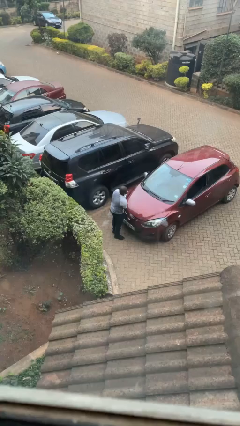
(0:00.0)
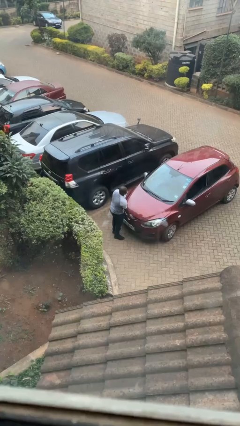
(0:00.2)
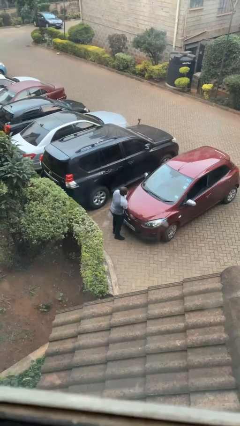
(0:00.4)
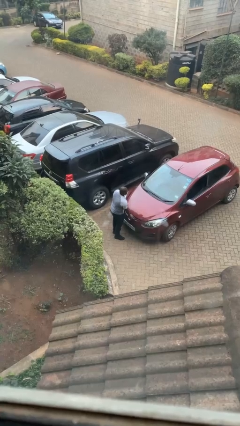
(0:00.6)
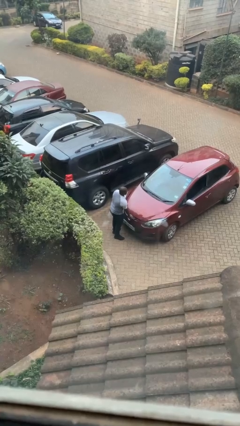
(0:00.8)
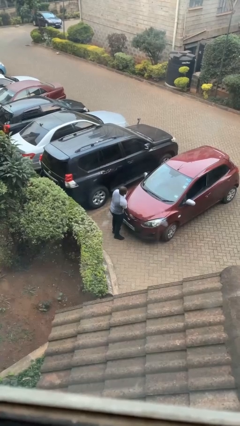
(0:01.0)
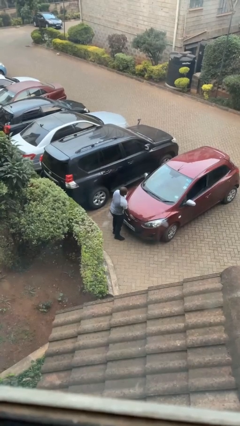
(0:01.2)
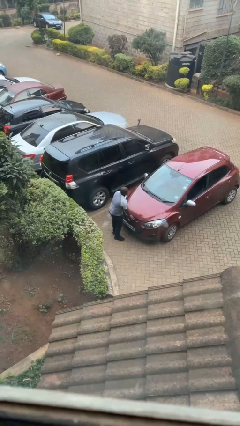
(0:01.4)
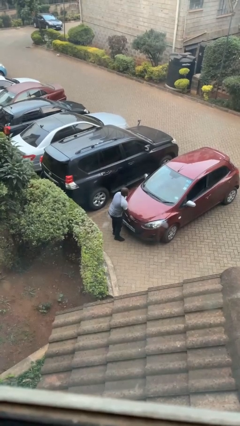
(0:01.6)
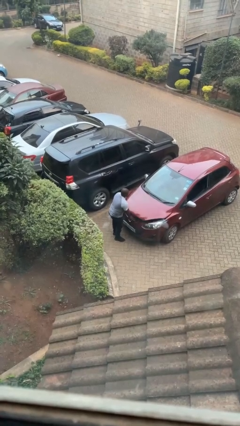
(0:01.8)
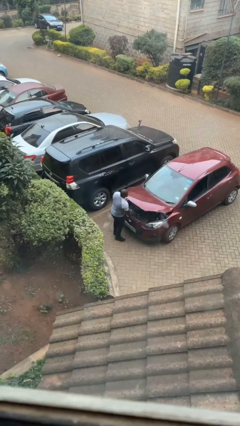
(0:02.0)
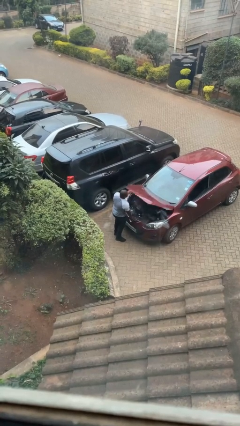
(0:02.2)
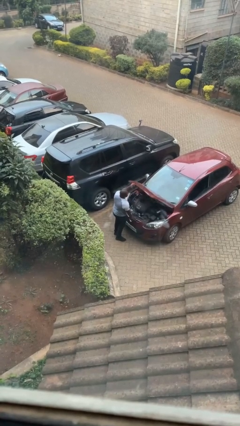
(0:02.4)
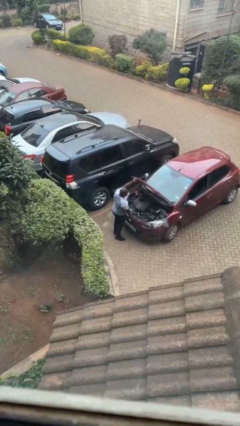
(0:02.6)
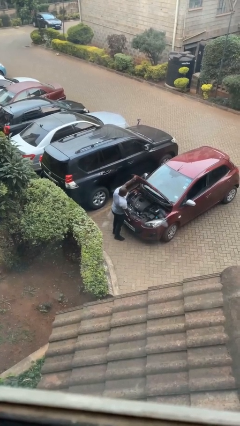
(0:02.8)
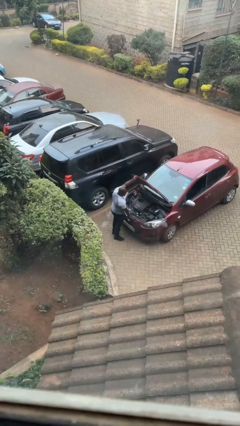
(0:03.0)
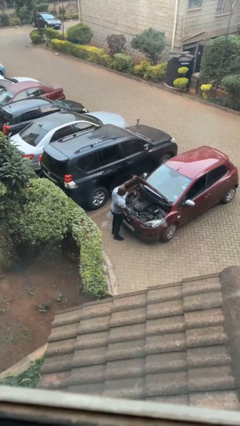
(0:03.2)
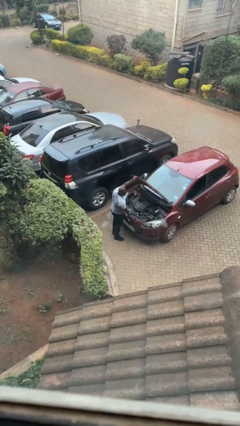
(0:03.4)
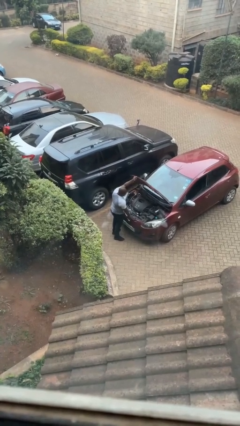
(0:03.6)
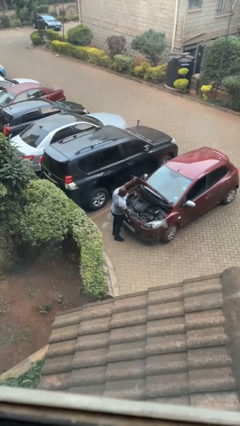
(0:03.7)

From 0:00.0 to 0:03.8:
person opens car hood

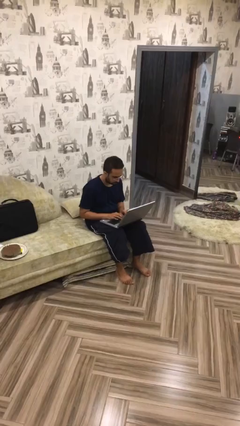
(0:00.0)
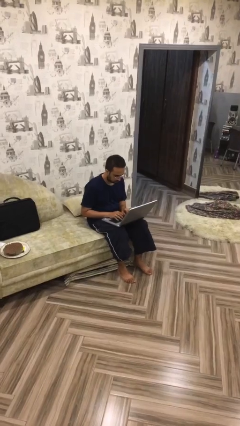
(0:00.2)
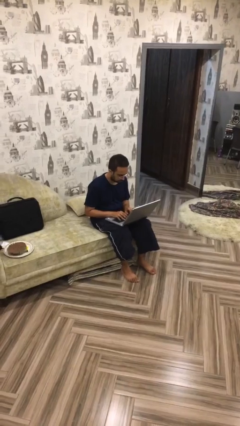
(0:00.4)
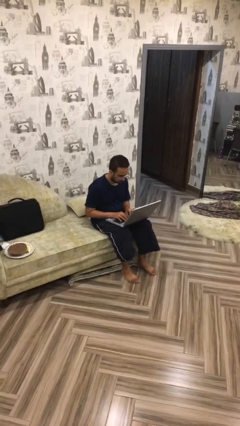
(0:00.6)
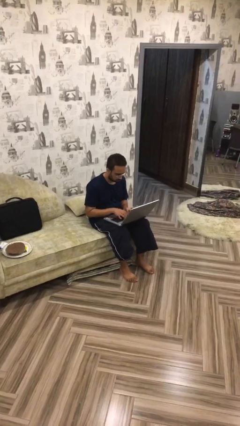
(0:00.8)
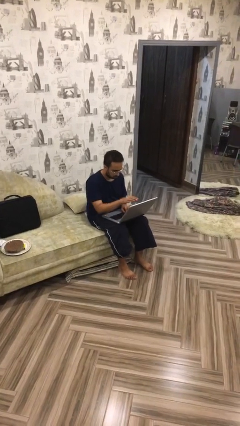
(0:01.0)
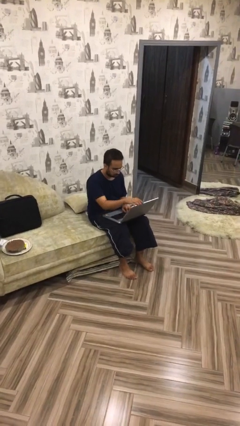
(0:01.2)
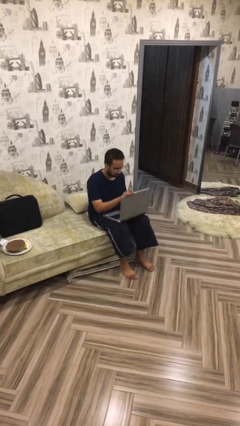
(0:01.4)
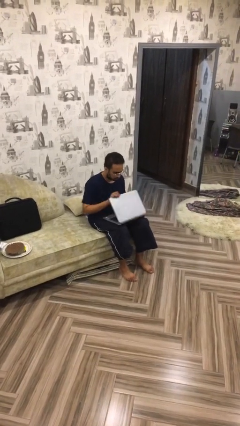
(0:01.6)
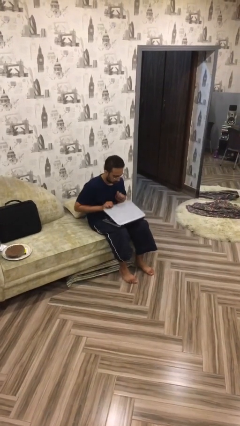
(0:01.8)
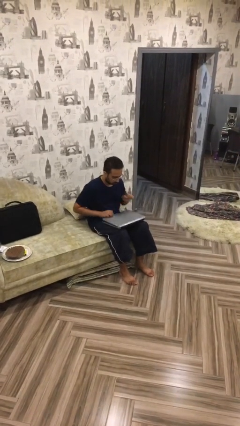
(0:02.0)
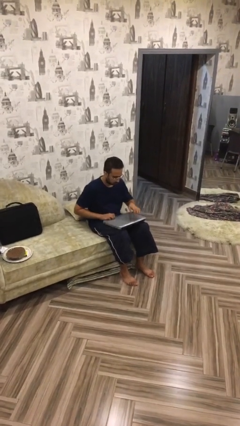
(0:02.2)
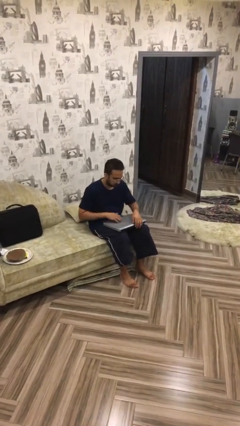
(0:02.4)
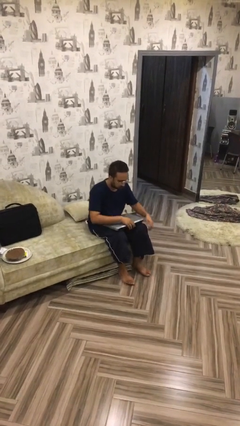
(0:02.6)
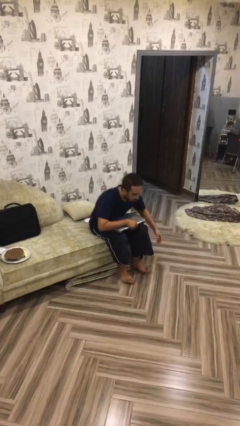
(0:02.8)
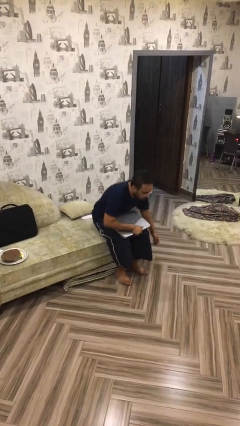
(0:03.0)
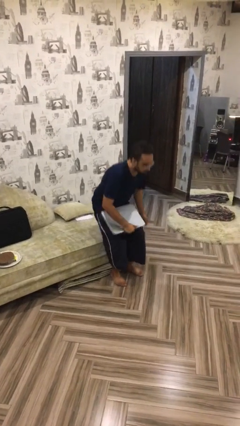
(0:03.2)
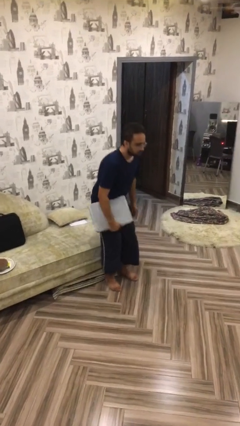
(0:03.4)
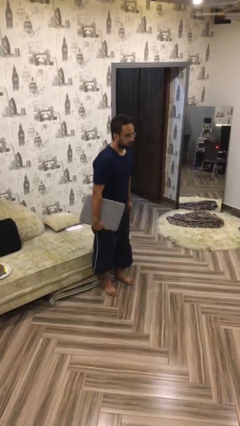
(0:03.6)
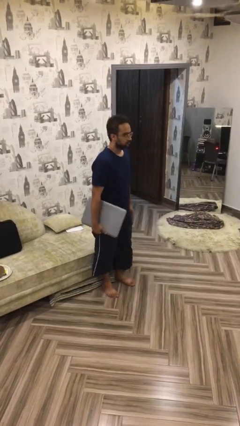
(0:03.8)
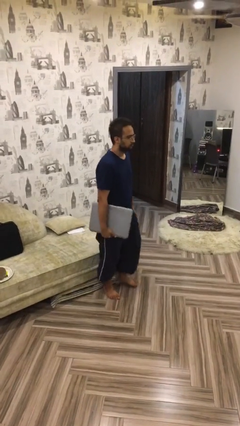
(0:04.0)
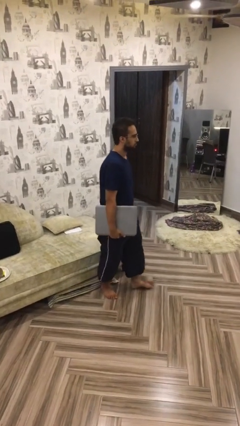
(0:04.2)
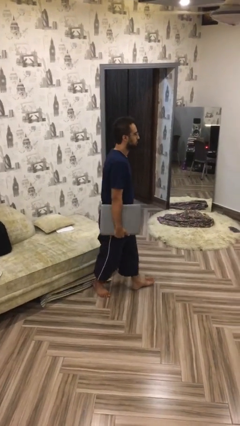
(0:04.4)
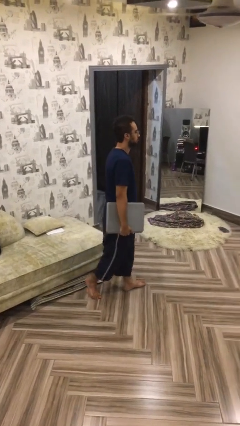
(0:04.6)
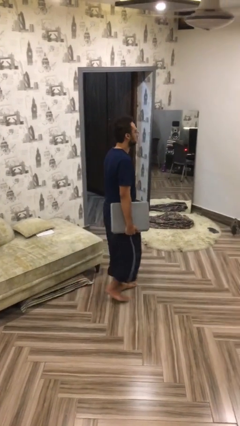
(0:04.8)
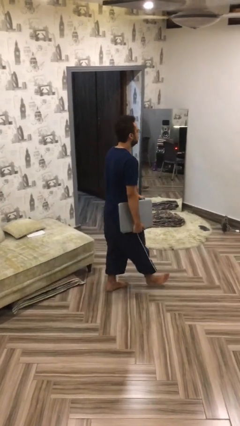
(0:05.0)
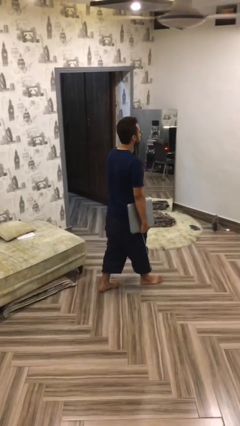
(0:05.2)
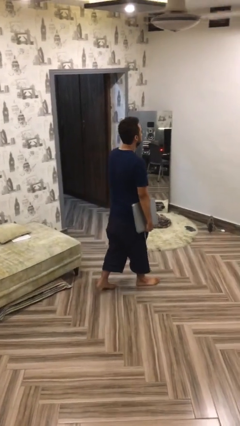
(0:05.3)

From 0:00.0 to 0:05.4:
person stands up

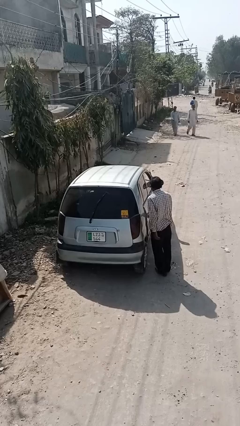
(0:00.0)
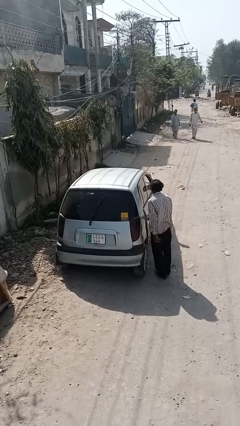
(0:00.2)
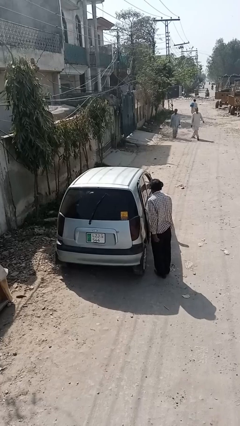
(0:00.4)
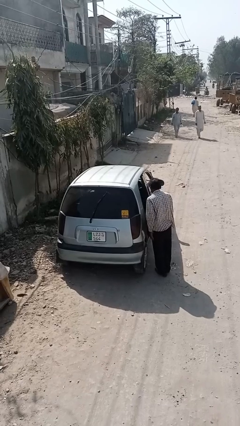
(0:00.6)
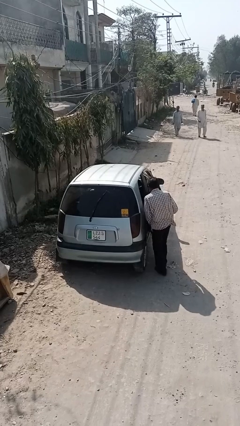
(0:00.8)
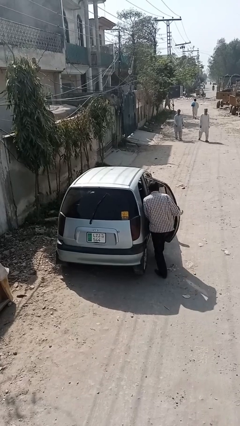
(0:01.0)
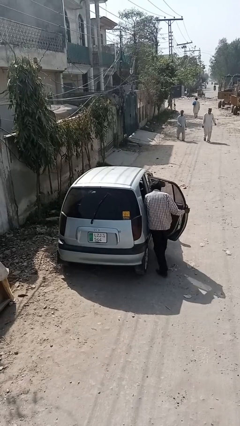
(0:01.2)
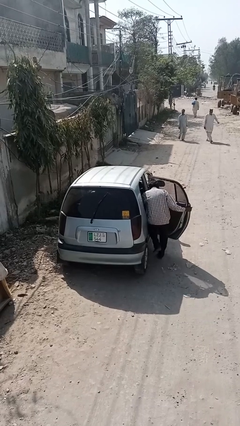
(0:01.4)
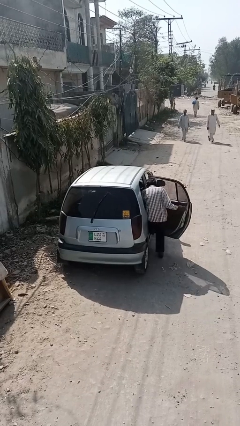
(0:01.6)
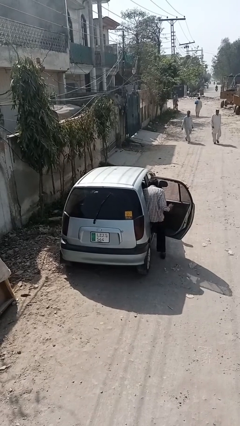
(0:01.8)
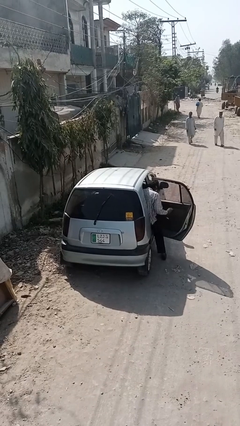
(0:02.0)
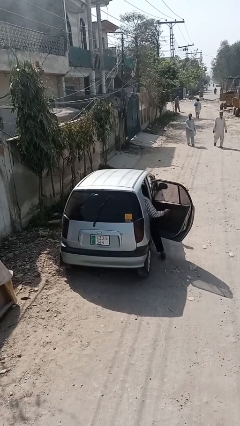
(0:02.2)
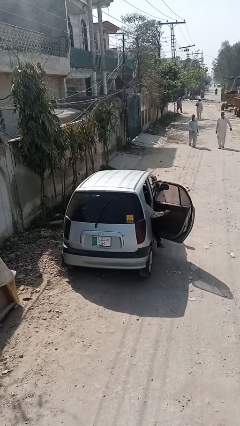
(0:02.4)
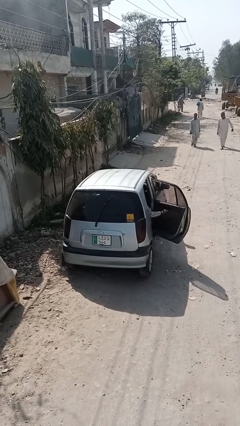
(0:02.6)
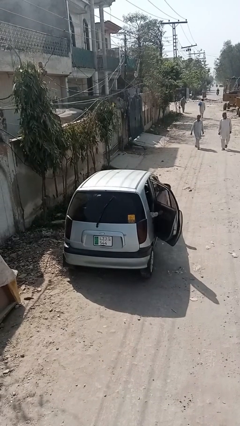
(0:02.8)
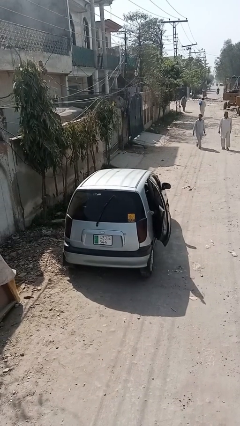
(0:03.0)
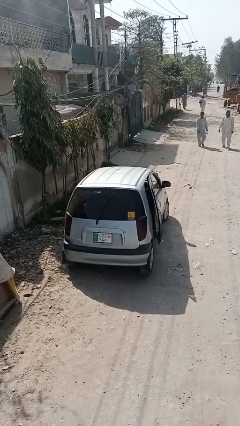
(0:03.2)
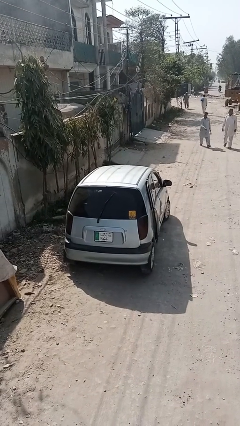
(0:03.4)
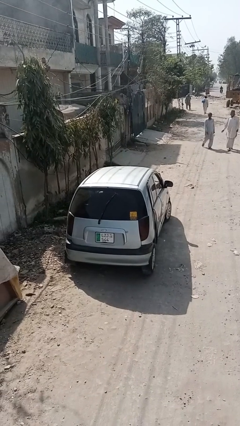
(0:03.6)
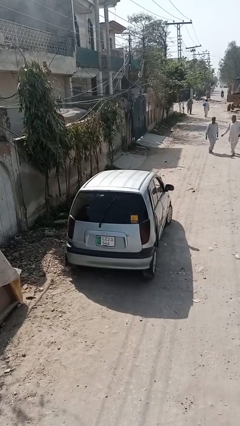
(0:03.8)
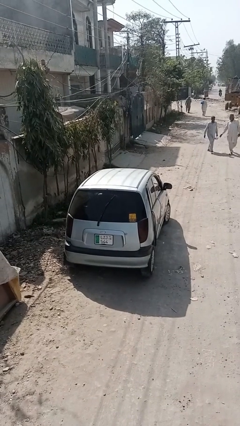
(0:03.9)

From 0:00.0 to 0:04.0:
car picks up person

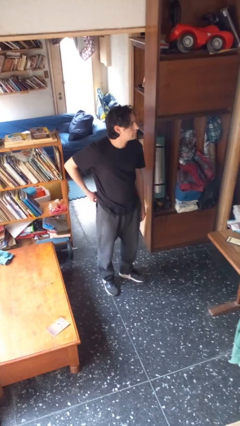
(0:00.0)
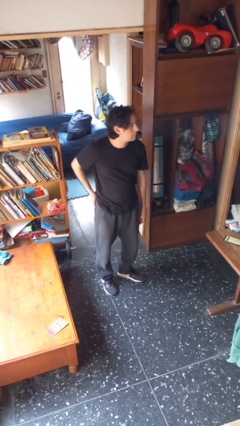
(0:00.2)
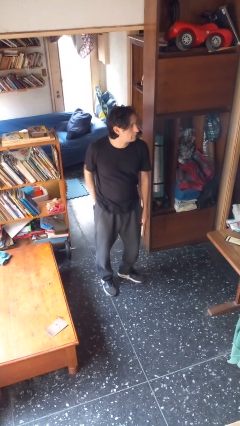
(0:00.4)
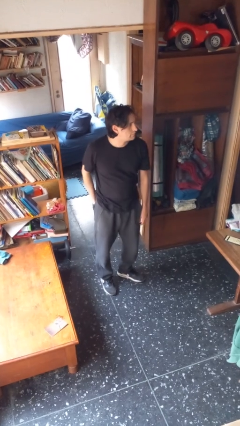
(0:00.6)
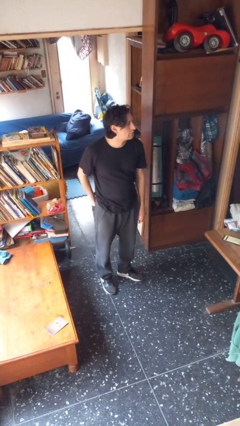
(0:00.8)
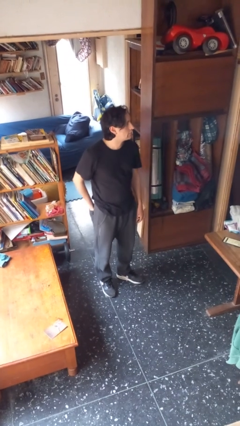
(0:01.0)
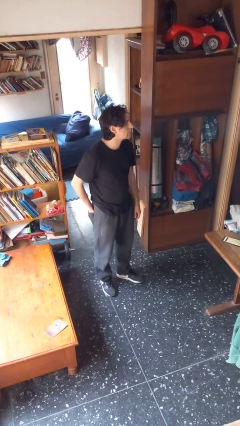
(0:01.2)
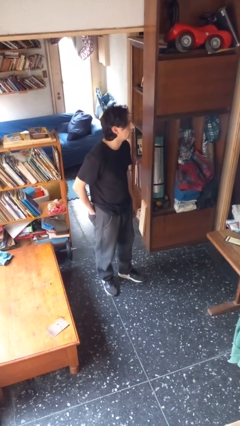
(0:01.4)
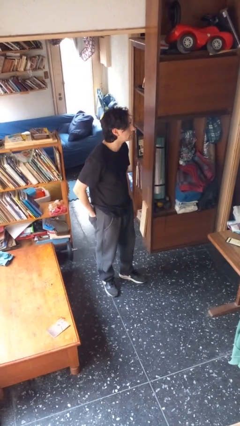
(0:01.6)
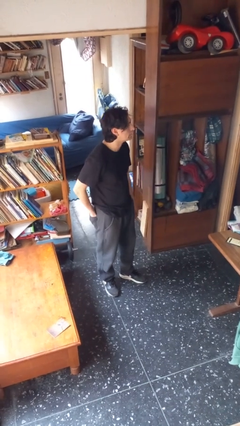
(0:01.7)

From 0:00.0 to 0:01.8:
person puts hands in back pockets

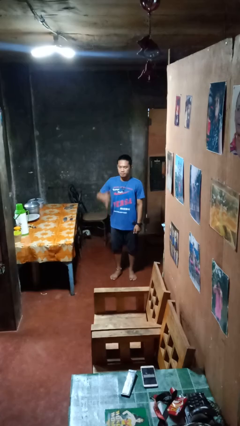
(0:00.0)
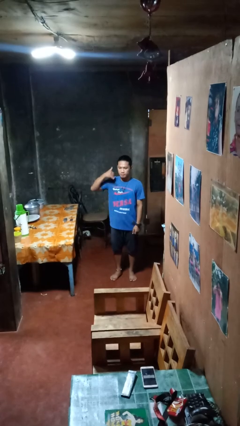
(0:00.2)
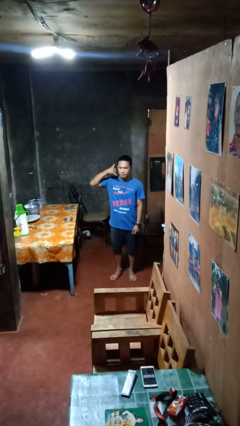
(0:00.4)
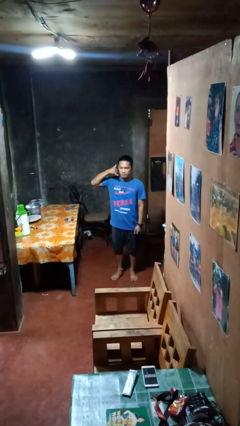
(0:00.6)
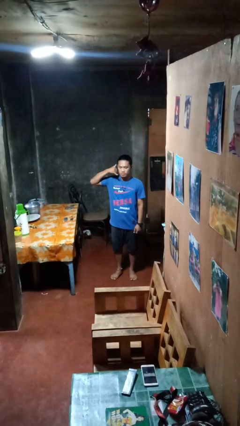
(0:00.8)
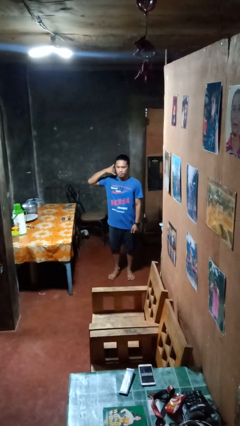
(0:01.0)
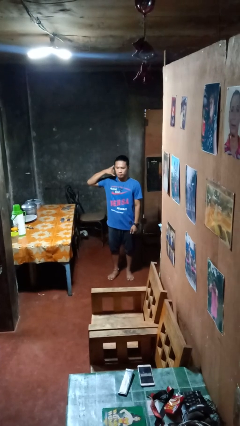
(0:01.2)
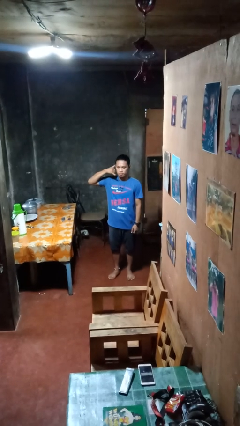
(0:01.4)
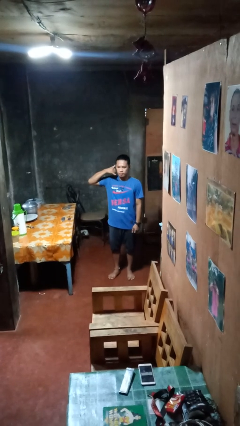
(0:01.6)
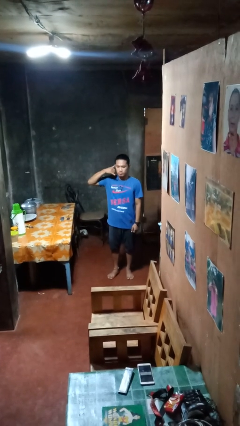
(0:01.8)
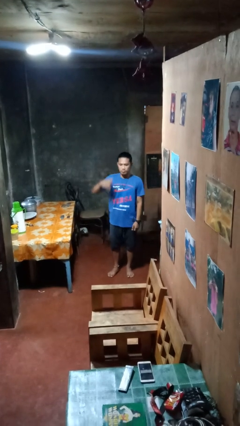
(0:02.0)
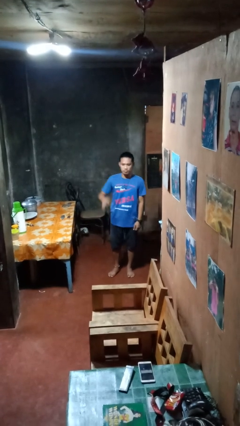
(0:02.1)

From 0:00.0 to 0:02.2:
person gestures call me

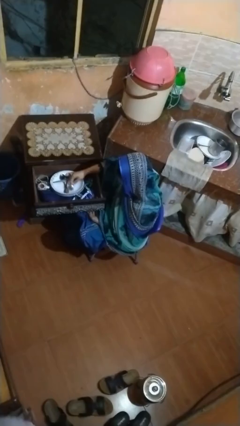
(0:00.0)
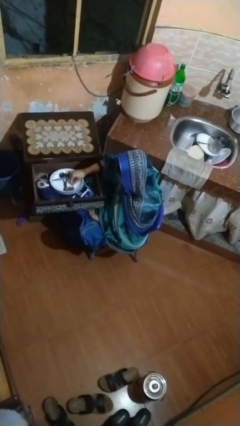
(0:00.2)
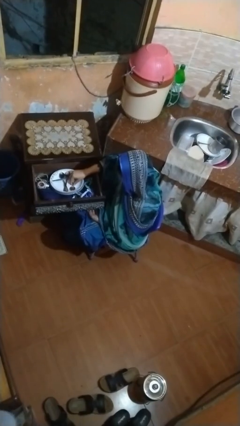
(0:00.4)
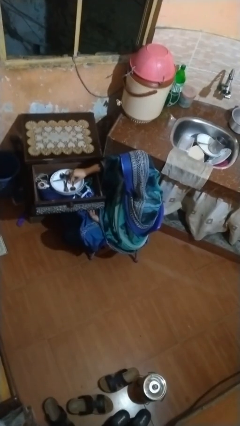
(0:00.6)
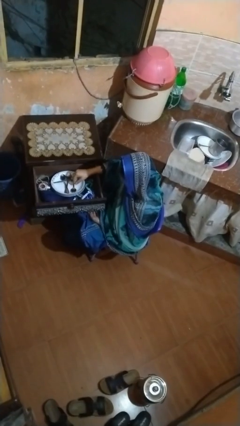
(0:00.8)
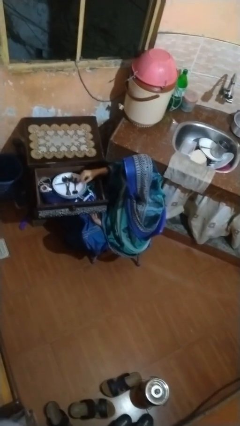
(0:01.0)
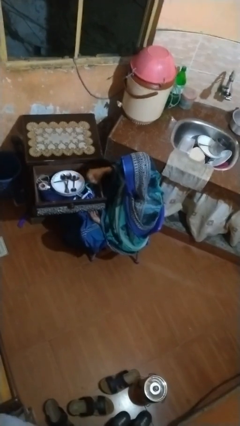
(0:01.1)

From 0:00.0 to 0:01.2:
person puts object into kitchen drawer
